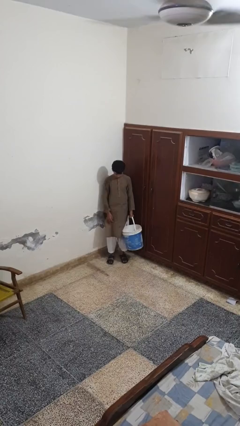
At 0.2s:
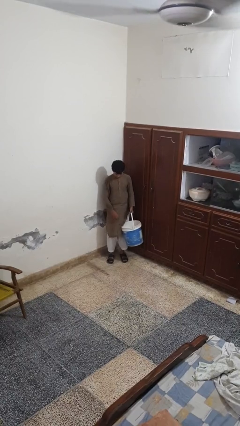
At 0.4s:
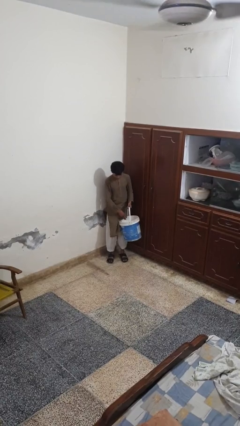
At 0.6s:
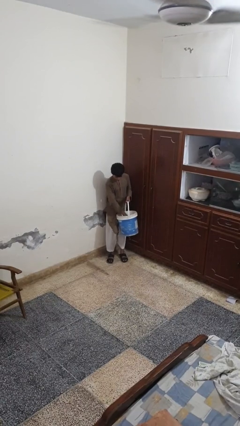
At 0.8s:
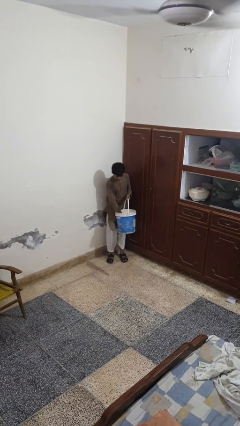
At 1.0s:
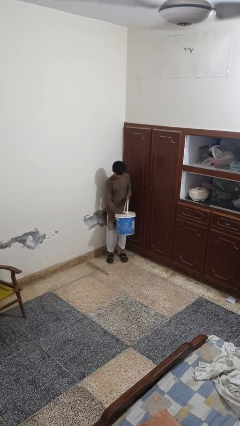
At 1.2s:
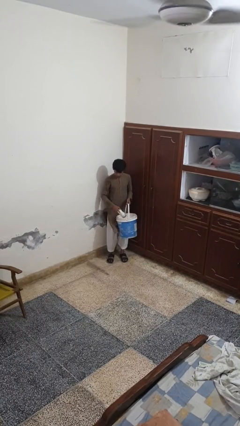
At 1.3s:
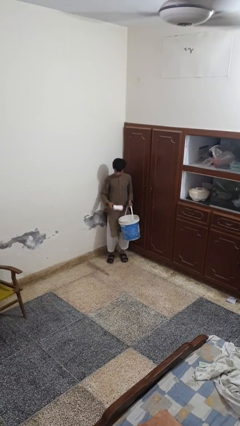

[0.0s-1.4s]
person takes object from basket

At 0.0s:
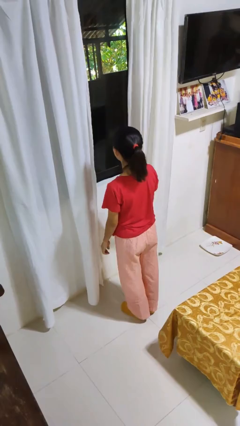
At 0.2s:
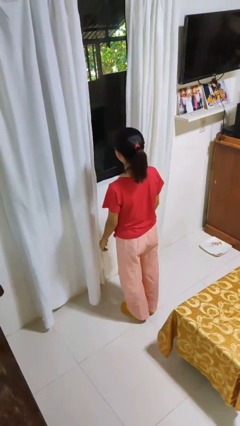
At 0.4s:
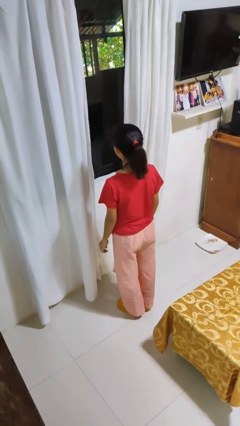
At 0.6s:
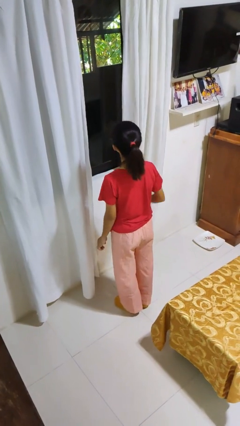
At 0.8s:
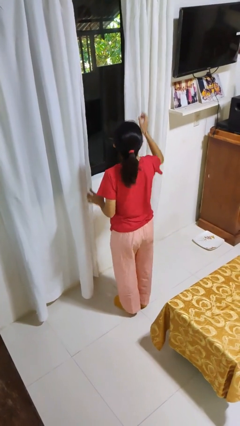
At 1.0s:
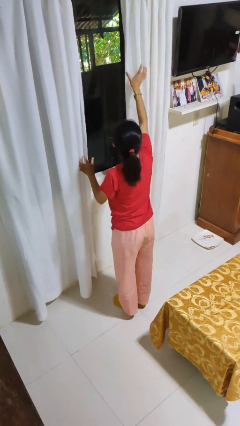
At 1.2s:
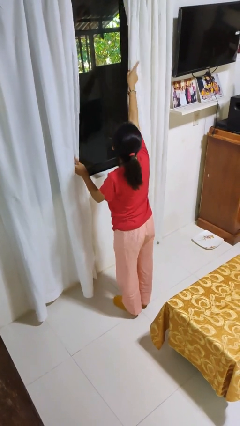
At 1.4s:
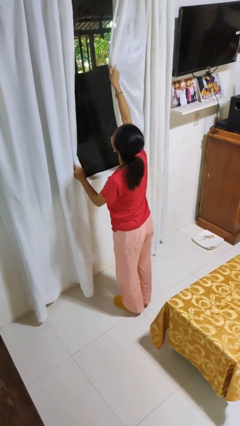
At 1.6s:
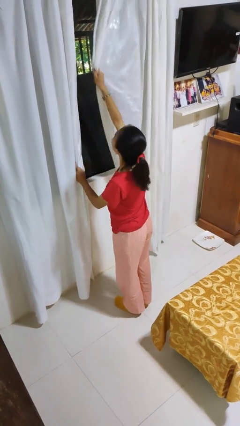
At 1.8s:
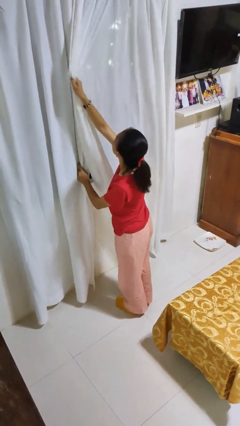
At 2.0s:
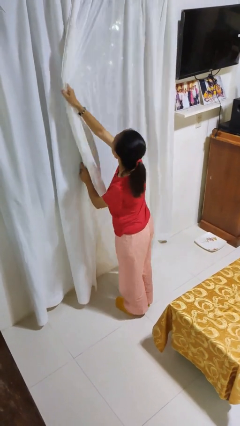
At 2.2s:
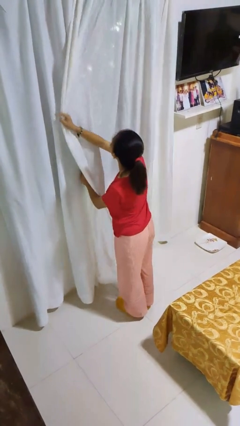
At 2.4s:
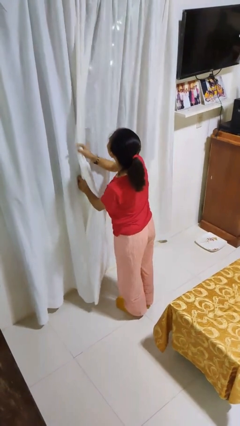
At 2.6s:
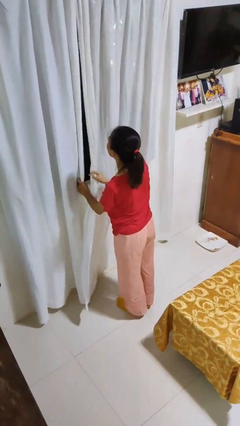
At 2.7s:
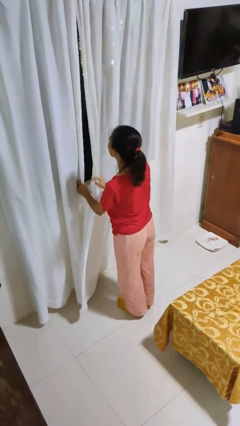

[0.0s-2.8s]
person closes curtains

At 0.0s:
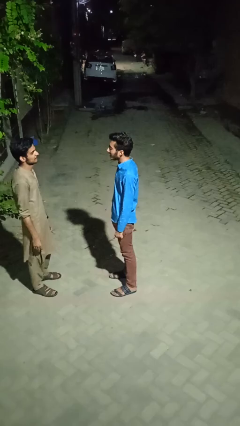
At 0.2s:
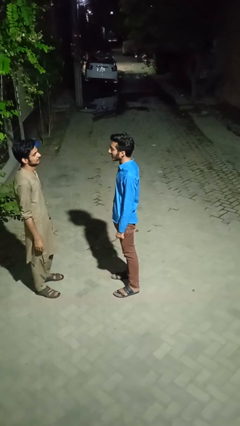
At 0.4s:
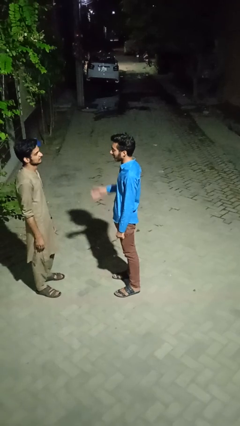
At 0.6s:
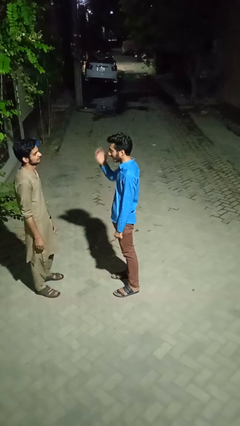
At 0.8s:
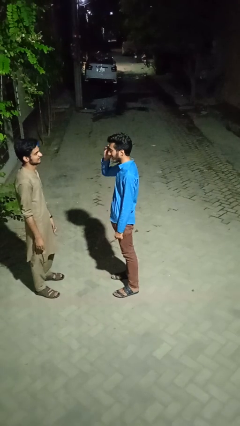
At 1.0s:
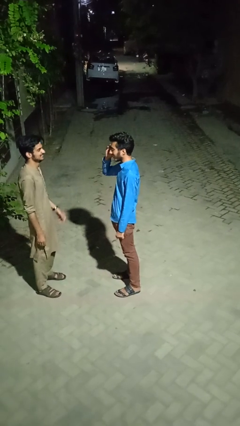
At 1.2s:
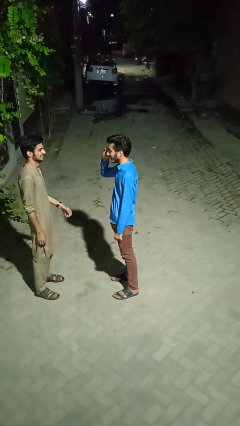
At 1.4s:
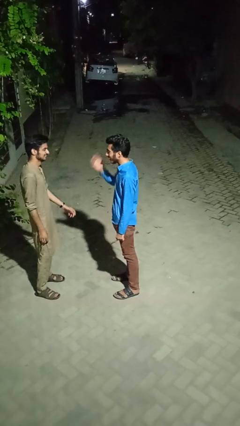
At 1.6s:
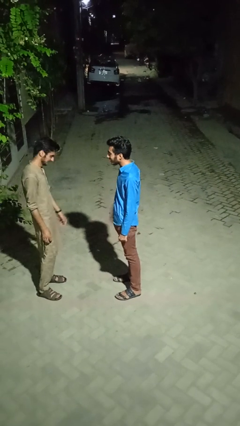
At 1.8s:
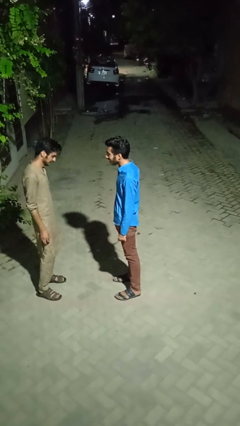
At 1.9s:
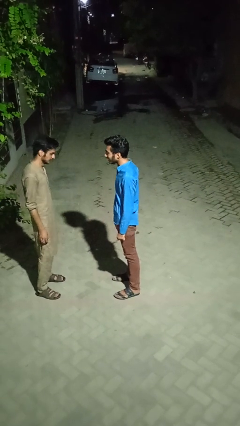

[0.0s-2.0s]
person laughs with person

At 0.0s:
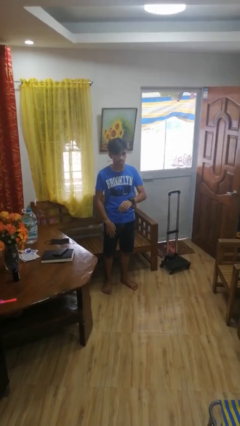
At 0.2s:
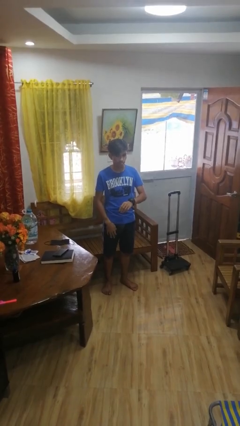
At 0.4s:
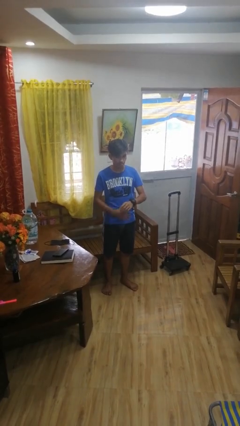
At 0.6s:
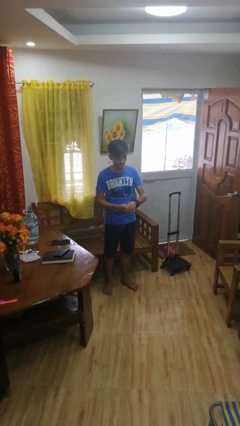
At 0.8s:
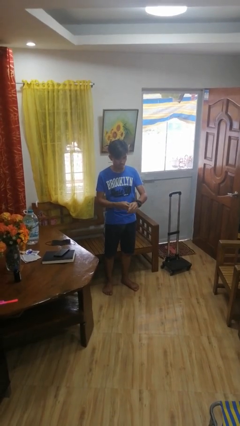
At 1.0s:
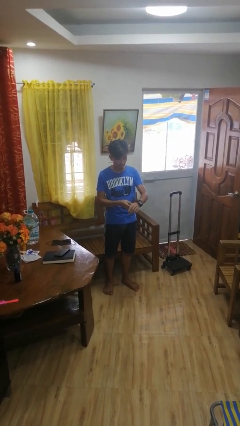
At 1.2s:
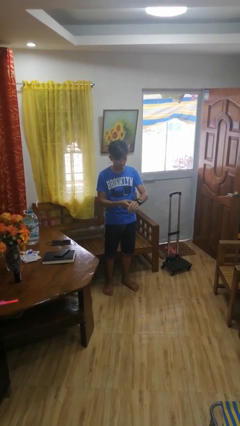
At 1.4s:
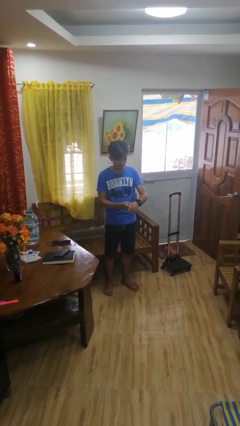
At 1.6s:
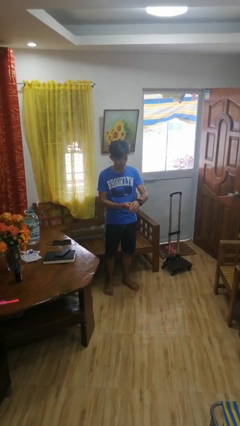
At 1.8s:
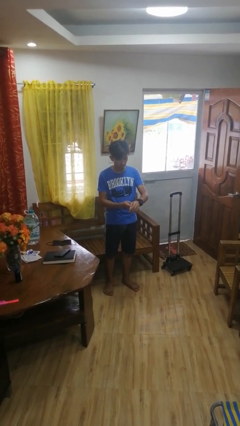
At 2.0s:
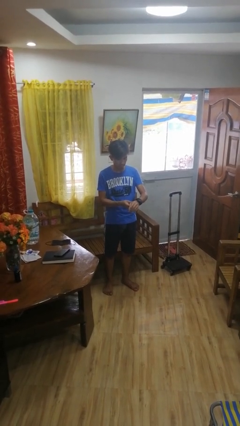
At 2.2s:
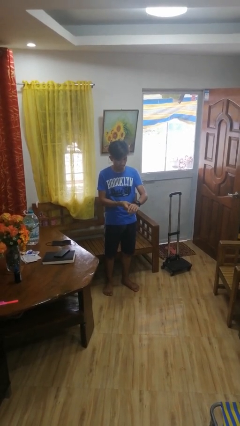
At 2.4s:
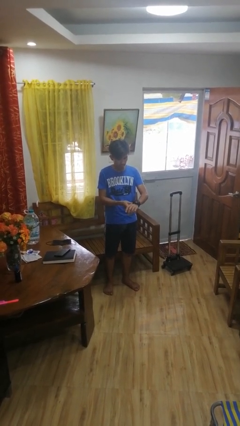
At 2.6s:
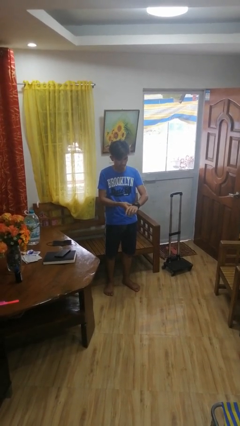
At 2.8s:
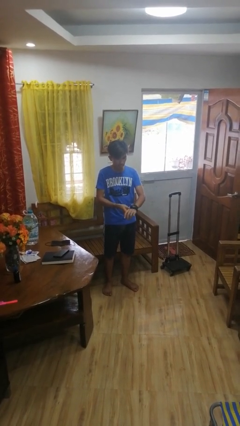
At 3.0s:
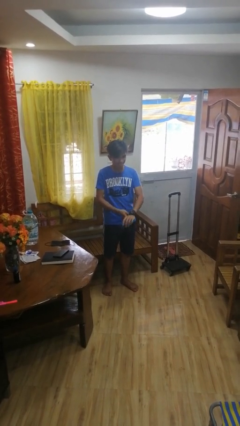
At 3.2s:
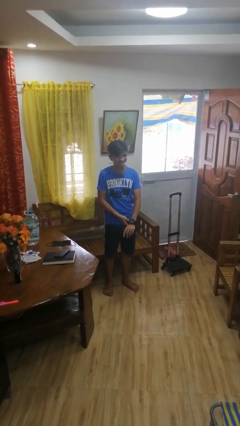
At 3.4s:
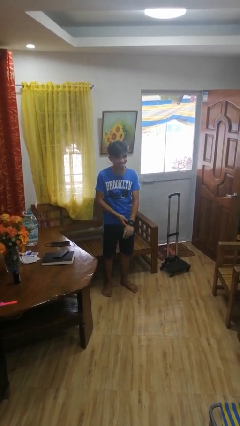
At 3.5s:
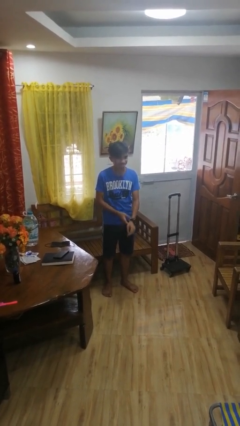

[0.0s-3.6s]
person takes off wristwatch

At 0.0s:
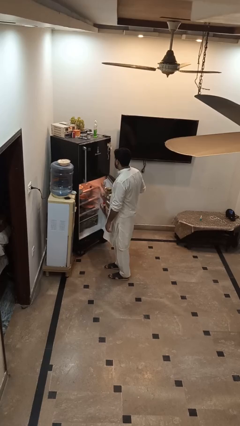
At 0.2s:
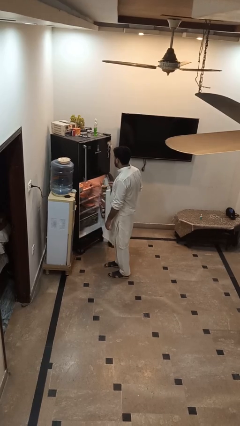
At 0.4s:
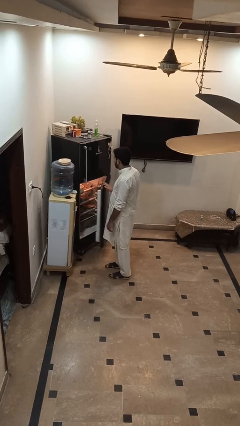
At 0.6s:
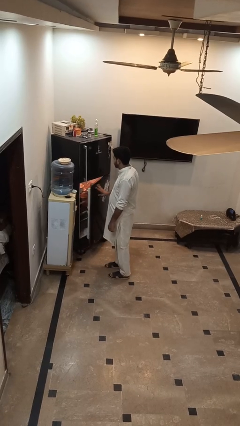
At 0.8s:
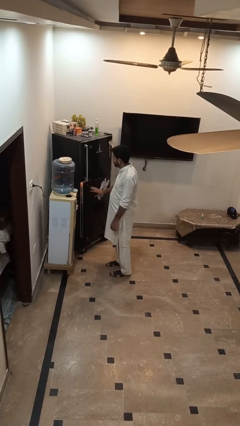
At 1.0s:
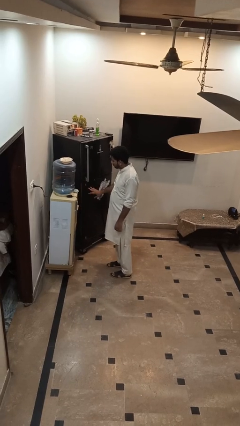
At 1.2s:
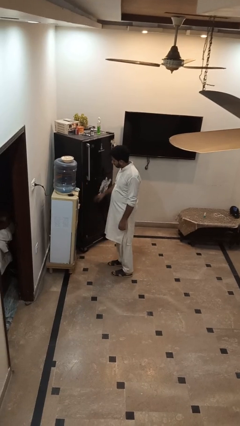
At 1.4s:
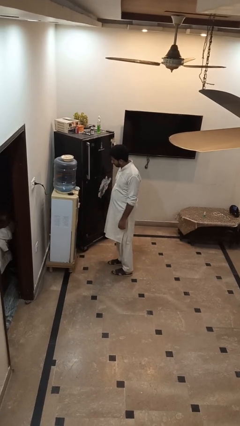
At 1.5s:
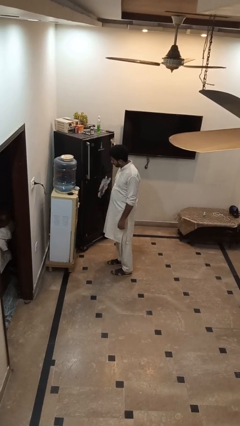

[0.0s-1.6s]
person closes refrigerator

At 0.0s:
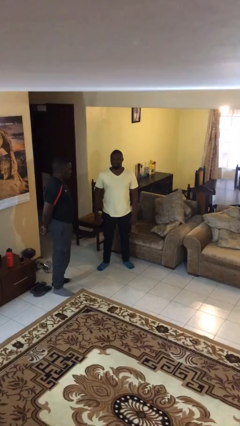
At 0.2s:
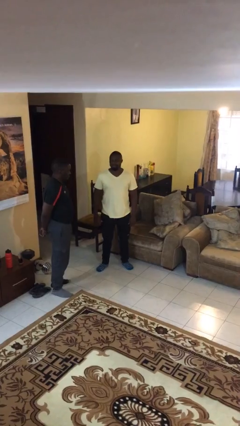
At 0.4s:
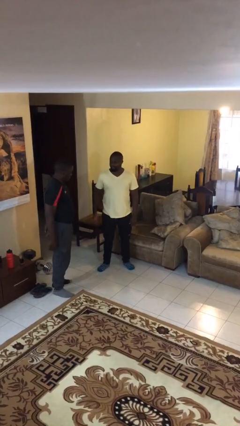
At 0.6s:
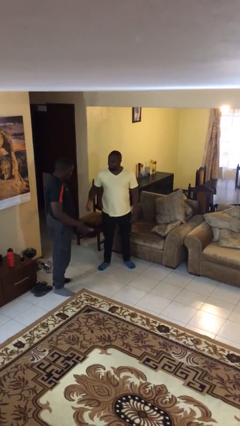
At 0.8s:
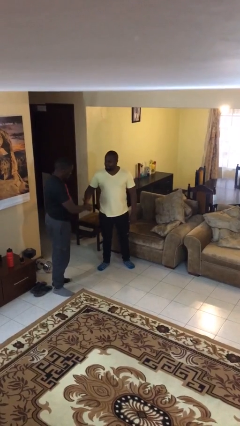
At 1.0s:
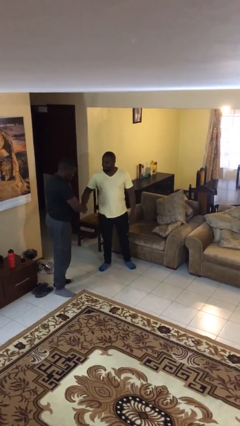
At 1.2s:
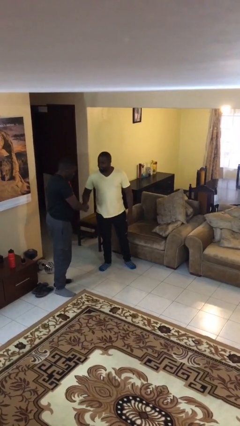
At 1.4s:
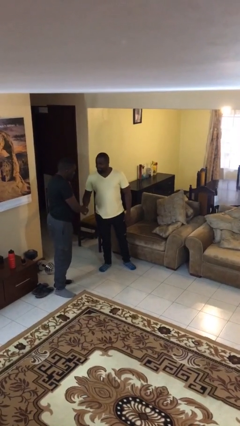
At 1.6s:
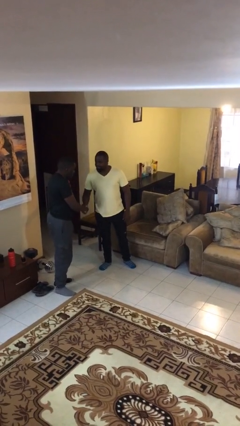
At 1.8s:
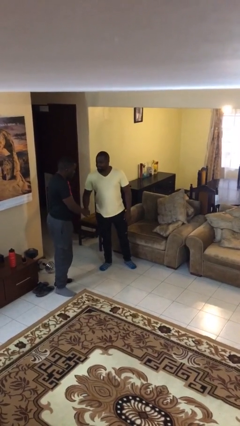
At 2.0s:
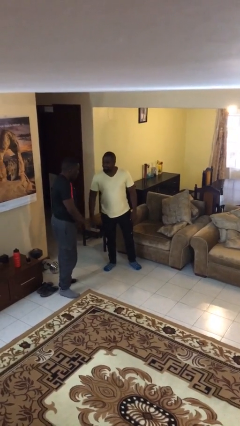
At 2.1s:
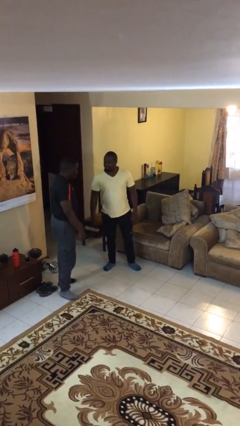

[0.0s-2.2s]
person shakes hand

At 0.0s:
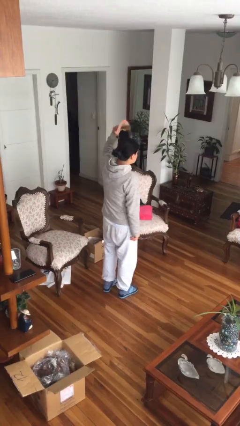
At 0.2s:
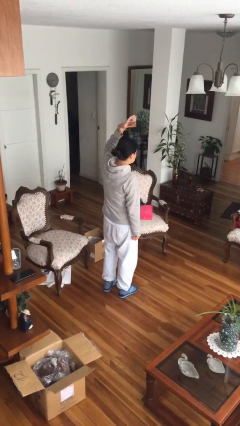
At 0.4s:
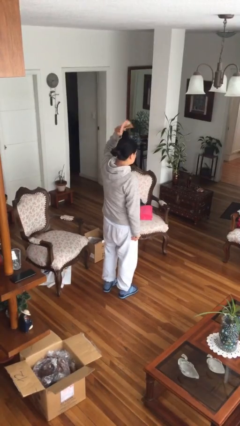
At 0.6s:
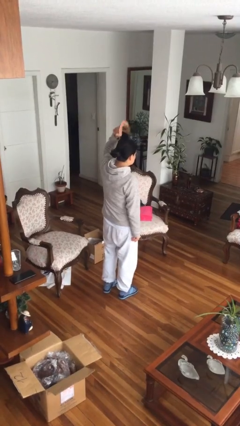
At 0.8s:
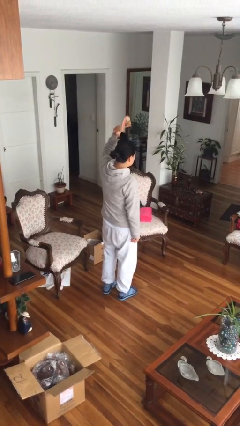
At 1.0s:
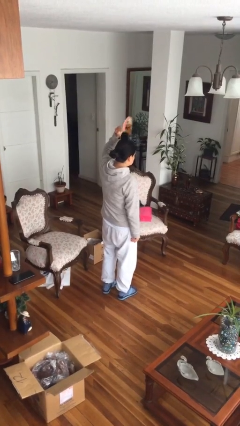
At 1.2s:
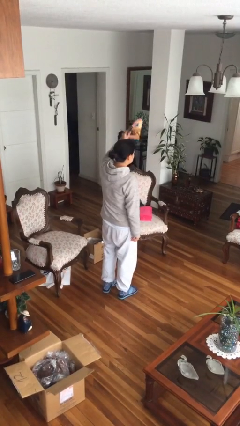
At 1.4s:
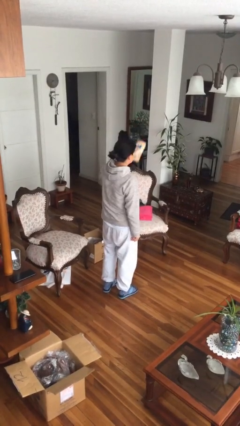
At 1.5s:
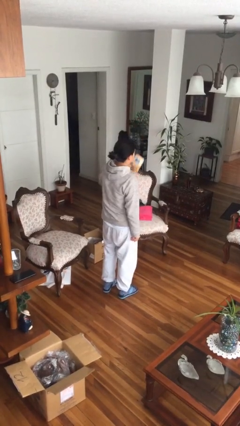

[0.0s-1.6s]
person holds object above head

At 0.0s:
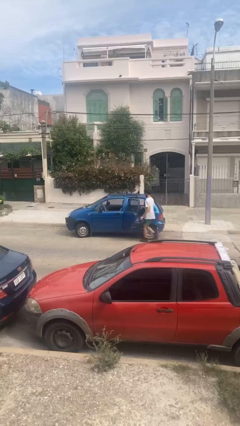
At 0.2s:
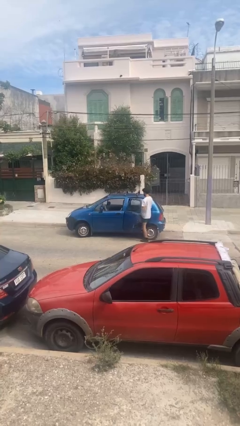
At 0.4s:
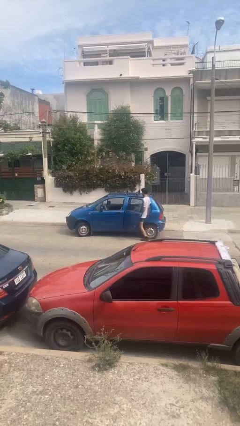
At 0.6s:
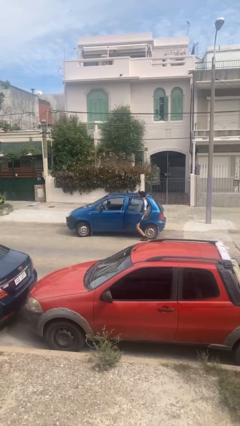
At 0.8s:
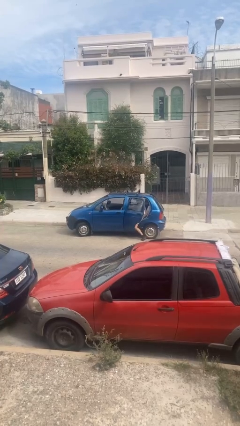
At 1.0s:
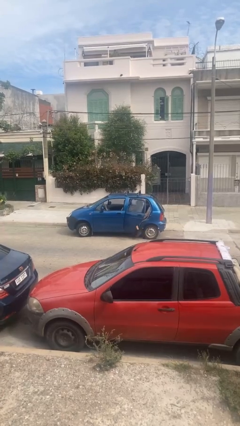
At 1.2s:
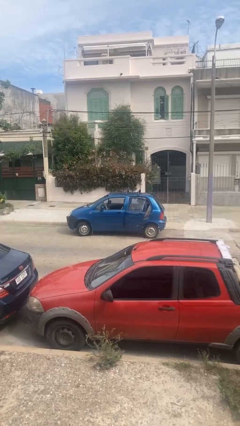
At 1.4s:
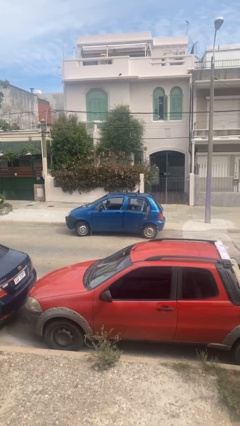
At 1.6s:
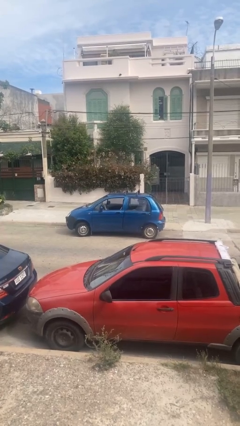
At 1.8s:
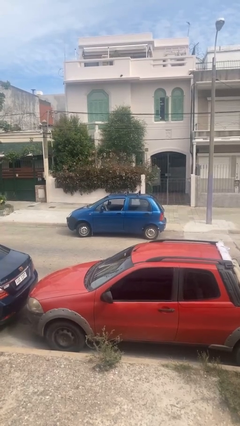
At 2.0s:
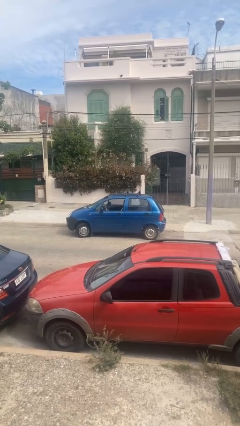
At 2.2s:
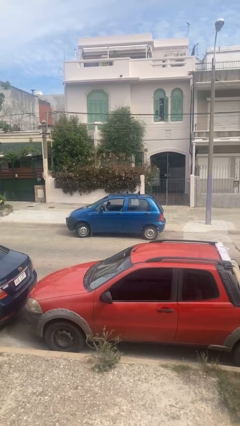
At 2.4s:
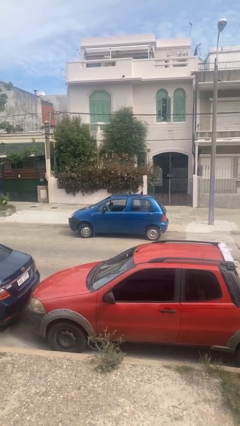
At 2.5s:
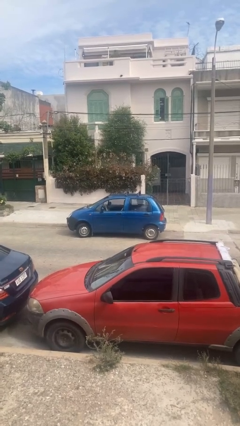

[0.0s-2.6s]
car picks up person
